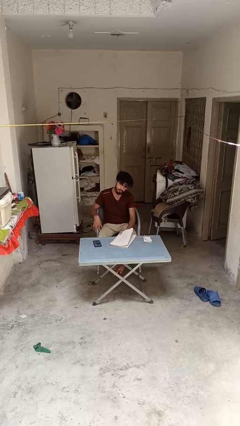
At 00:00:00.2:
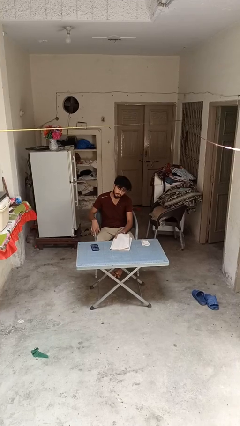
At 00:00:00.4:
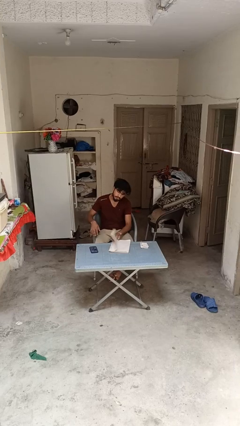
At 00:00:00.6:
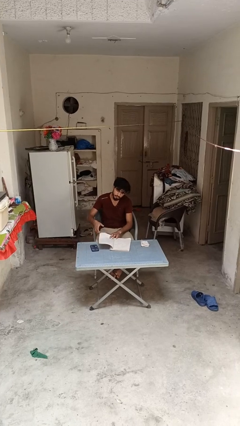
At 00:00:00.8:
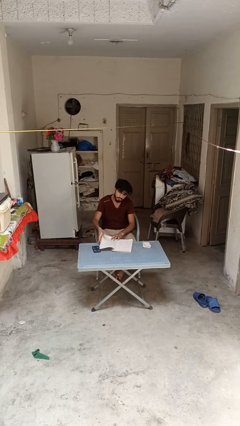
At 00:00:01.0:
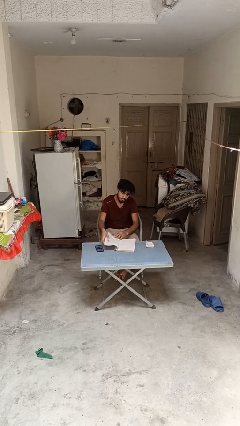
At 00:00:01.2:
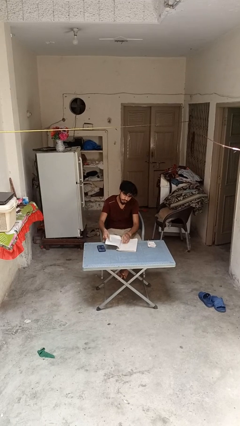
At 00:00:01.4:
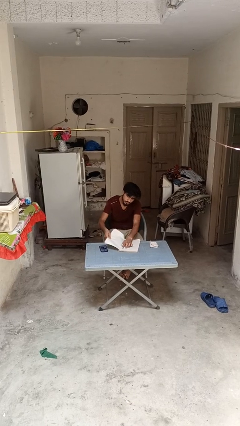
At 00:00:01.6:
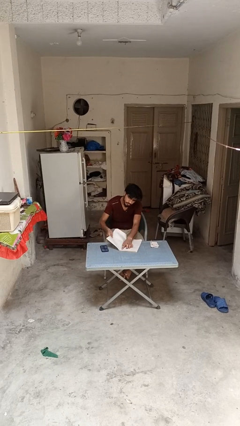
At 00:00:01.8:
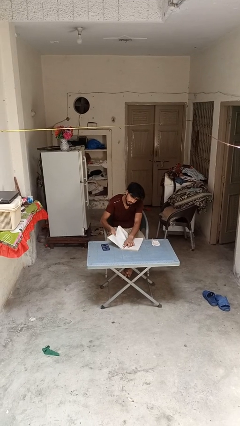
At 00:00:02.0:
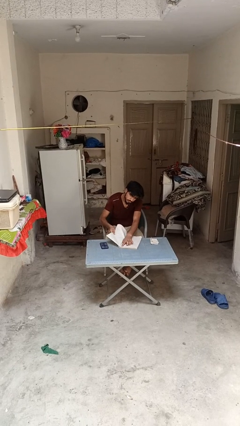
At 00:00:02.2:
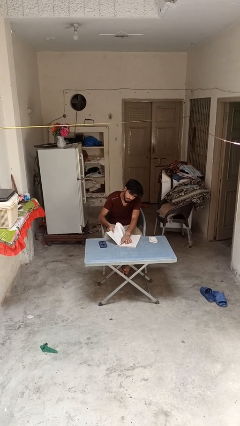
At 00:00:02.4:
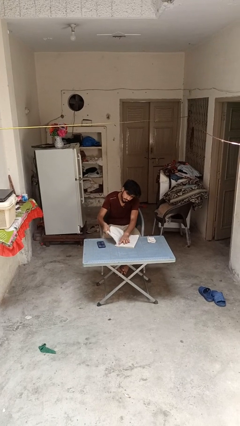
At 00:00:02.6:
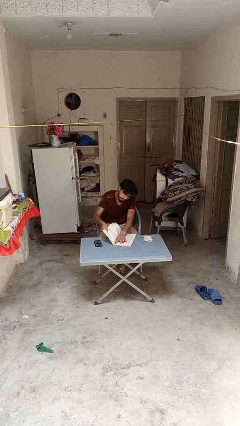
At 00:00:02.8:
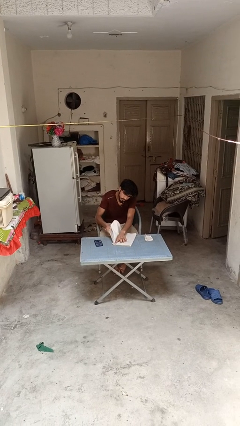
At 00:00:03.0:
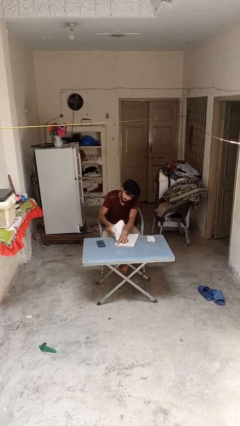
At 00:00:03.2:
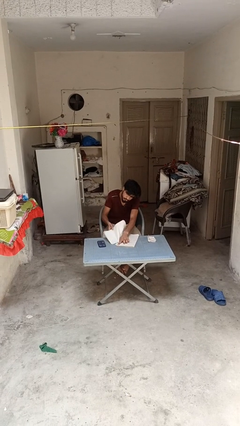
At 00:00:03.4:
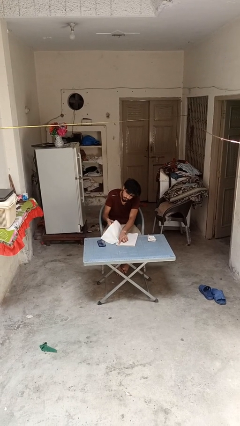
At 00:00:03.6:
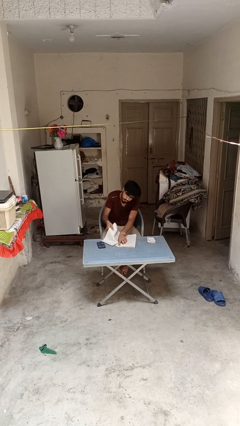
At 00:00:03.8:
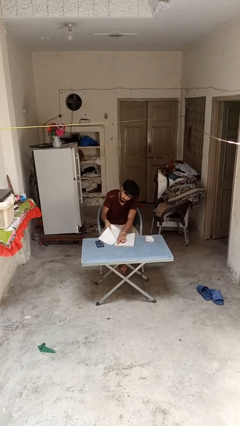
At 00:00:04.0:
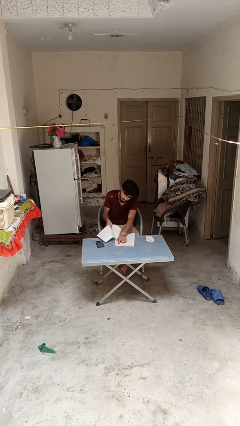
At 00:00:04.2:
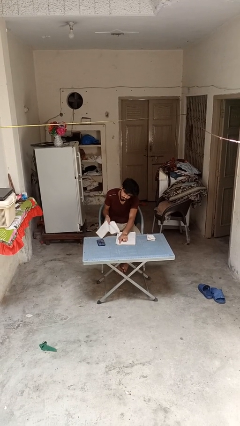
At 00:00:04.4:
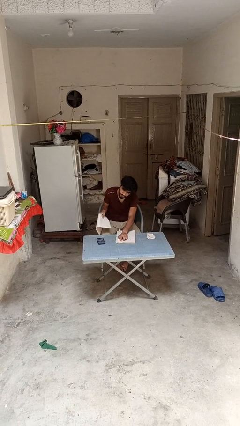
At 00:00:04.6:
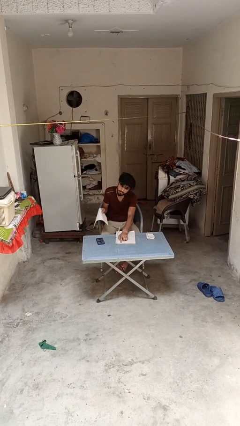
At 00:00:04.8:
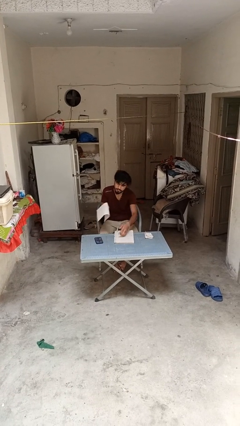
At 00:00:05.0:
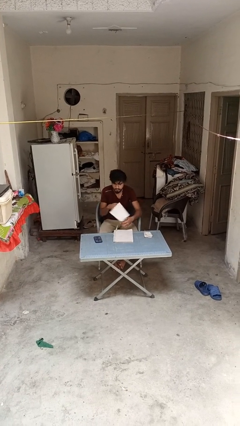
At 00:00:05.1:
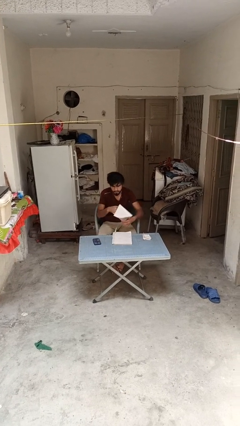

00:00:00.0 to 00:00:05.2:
person tears paper

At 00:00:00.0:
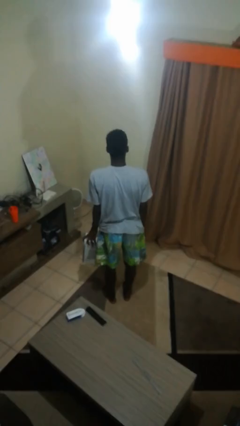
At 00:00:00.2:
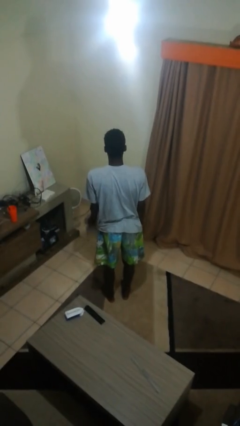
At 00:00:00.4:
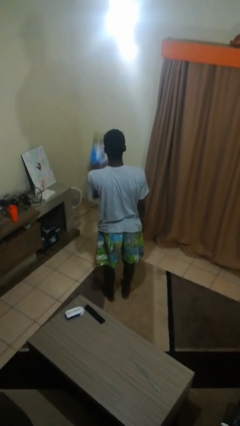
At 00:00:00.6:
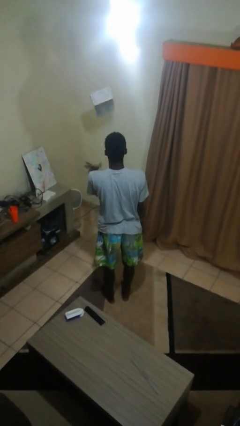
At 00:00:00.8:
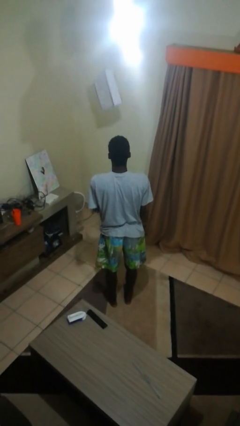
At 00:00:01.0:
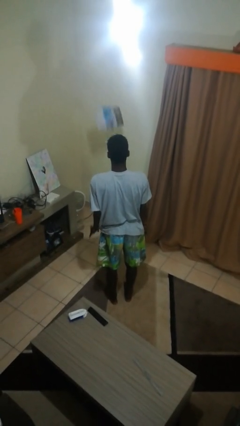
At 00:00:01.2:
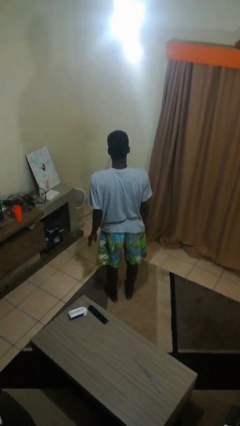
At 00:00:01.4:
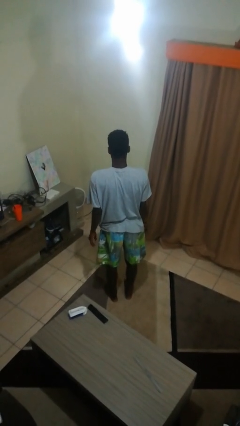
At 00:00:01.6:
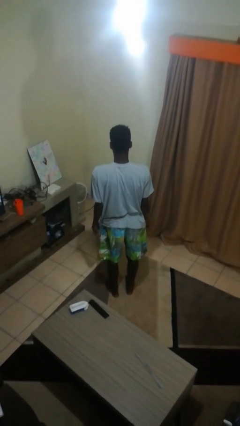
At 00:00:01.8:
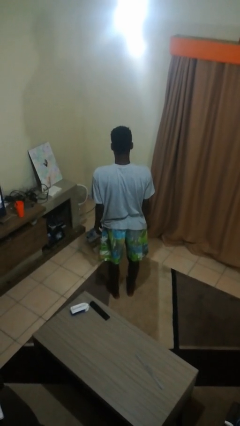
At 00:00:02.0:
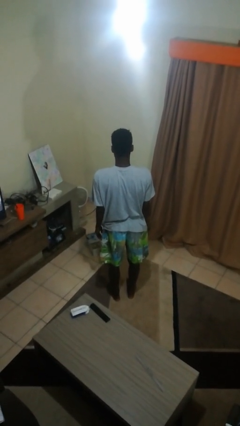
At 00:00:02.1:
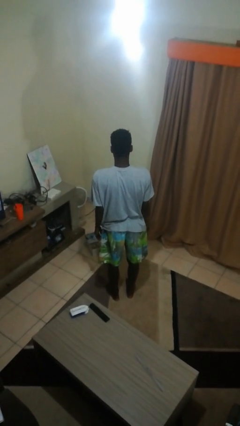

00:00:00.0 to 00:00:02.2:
person throws object into air

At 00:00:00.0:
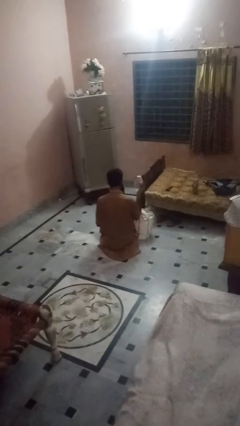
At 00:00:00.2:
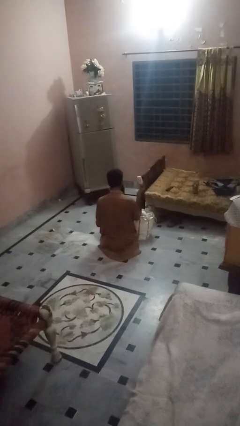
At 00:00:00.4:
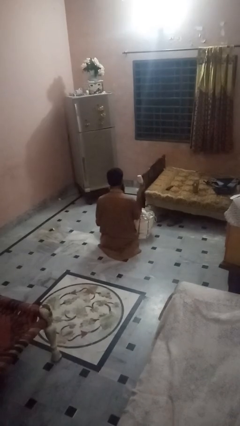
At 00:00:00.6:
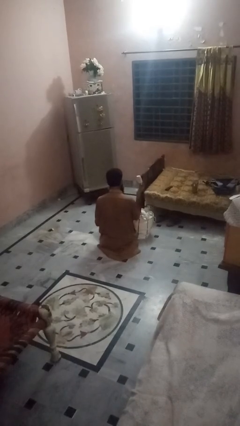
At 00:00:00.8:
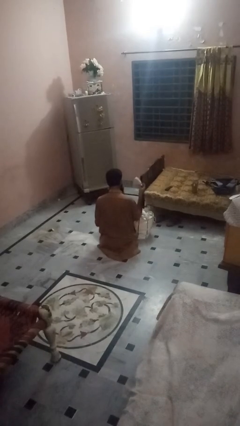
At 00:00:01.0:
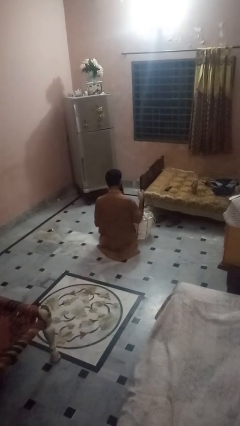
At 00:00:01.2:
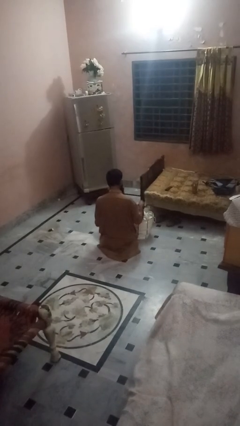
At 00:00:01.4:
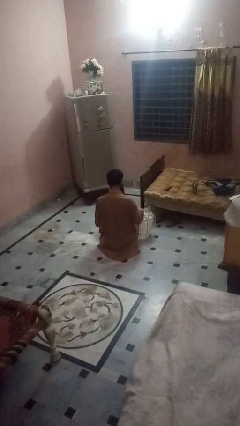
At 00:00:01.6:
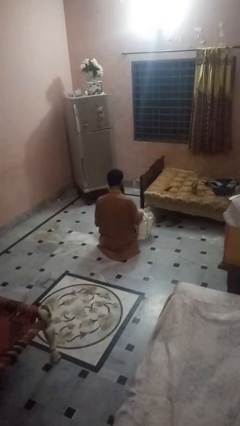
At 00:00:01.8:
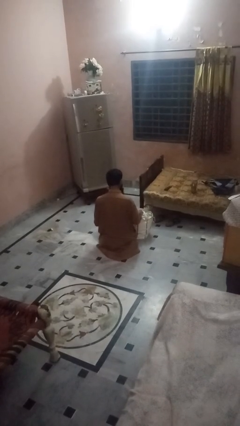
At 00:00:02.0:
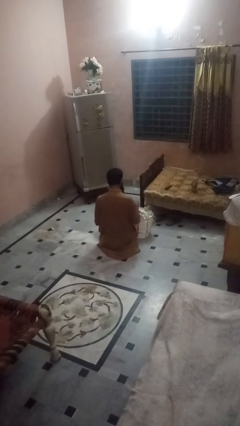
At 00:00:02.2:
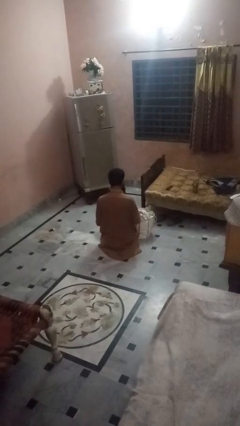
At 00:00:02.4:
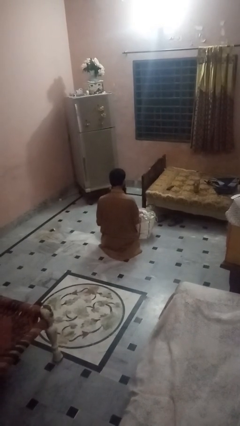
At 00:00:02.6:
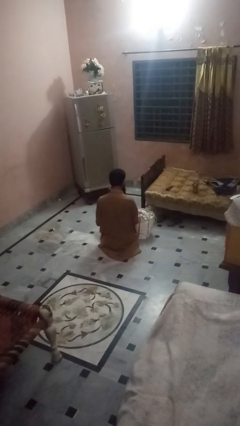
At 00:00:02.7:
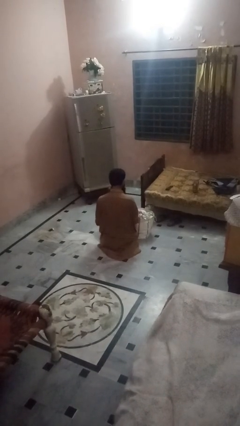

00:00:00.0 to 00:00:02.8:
person puts object into bag

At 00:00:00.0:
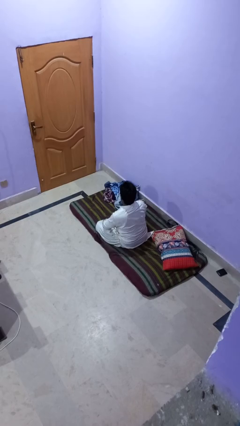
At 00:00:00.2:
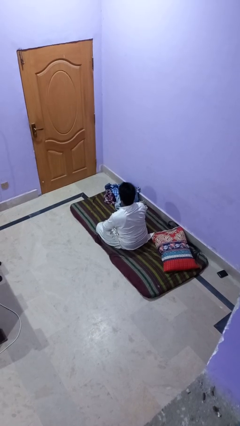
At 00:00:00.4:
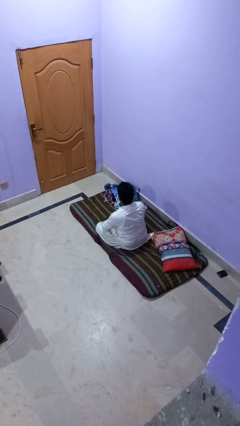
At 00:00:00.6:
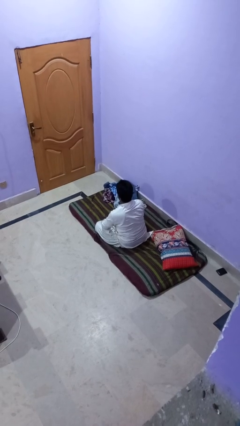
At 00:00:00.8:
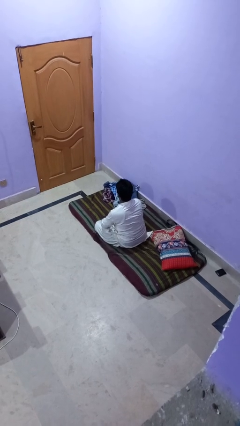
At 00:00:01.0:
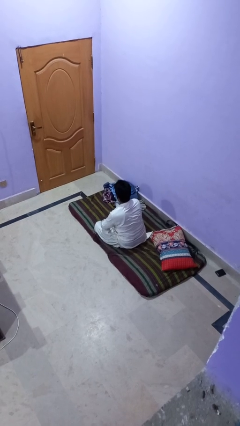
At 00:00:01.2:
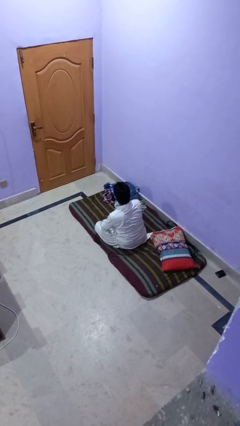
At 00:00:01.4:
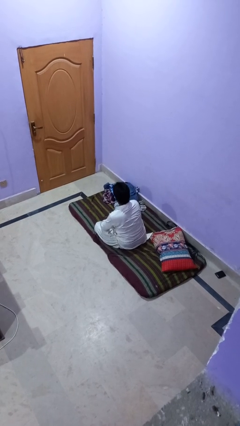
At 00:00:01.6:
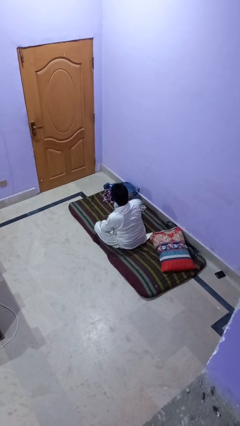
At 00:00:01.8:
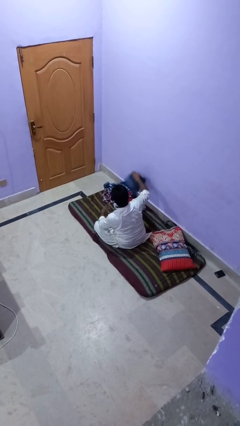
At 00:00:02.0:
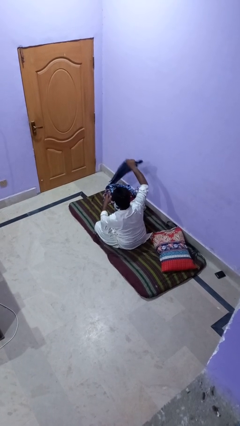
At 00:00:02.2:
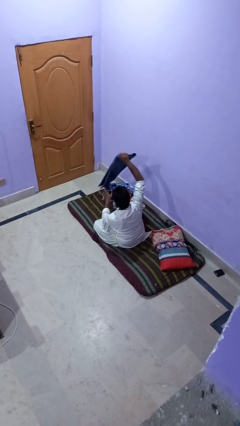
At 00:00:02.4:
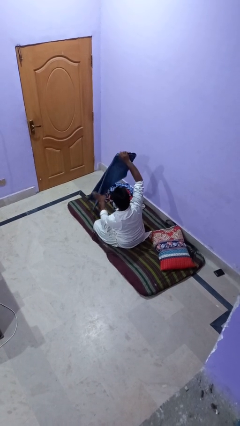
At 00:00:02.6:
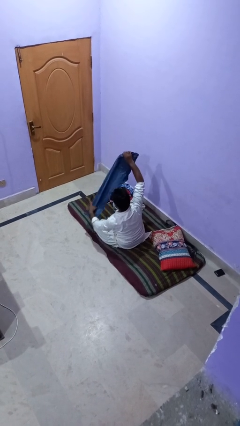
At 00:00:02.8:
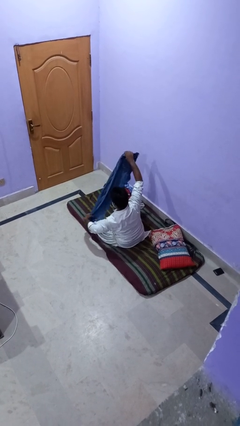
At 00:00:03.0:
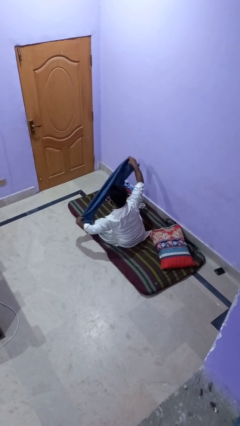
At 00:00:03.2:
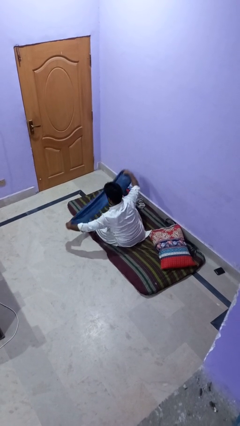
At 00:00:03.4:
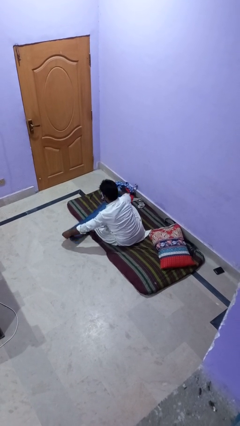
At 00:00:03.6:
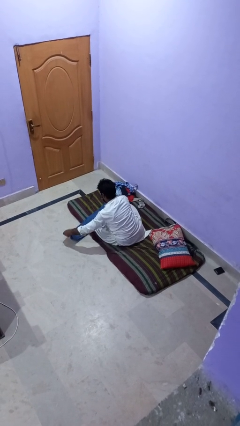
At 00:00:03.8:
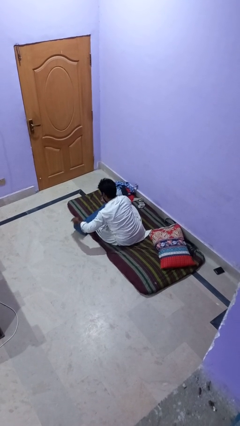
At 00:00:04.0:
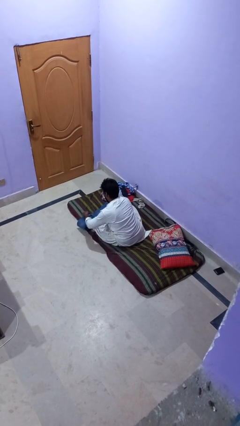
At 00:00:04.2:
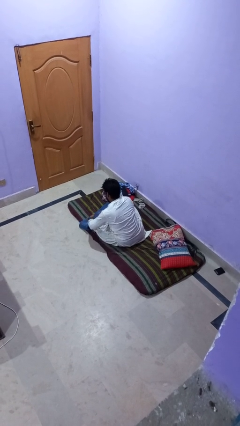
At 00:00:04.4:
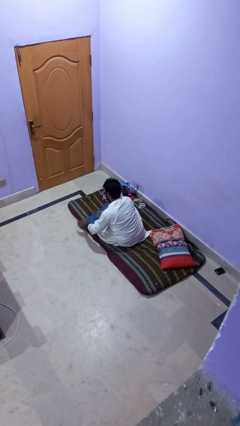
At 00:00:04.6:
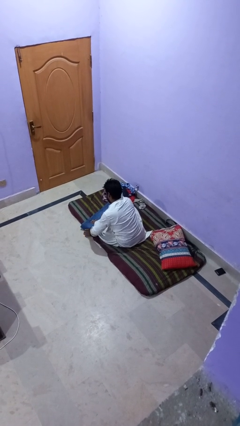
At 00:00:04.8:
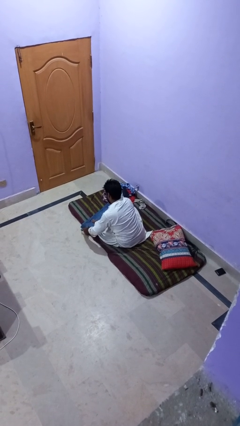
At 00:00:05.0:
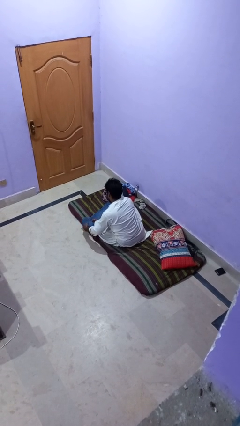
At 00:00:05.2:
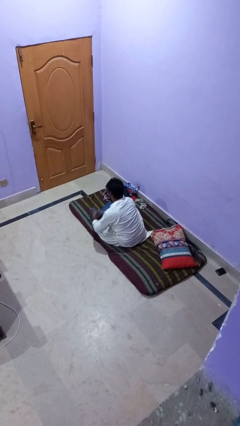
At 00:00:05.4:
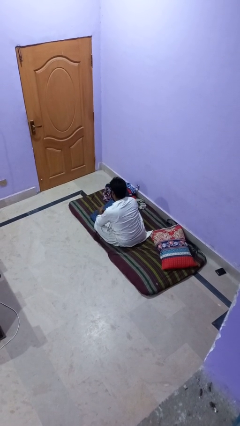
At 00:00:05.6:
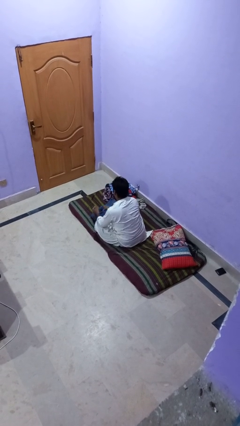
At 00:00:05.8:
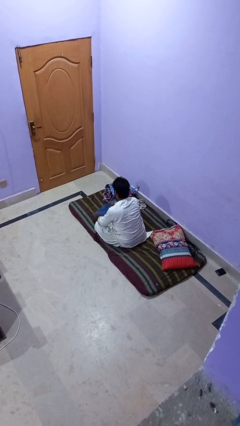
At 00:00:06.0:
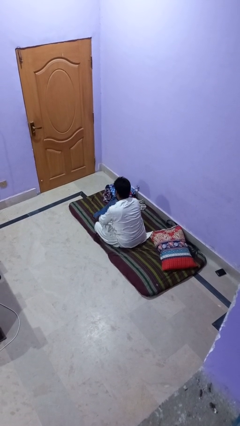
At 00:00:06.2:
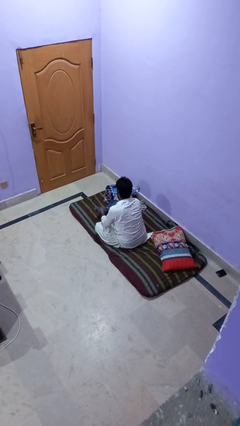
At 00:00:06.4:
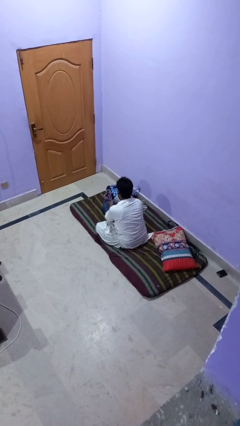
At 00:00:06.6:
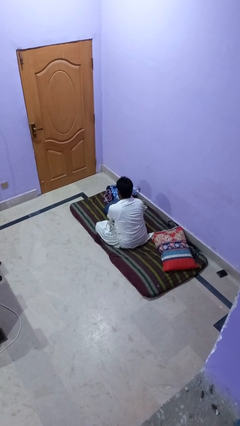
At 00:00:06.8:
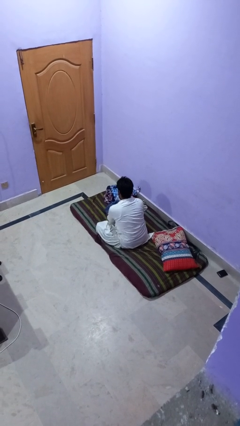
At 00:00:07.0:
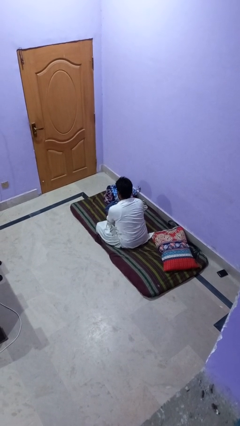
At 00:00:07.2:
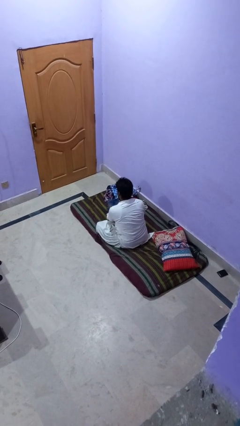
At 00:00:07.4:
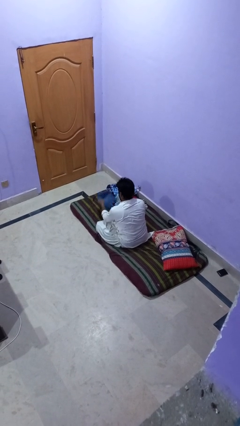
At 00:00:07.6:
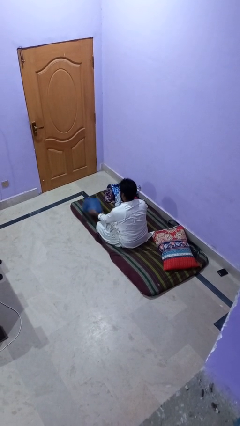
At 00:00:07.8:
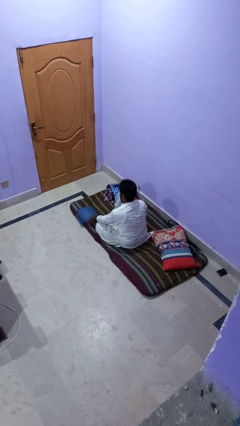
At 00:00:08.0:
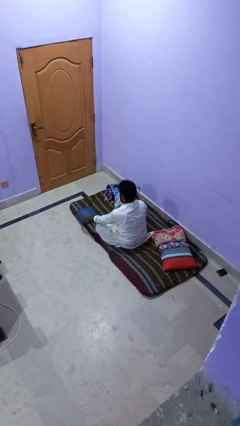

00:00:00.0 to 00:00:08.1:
person folds pants
